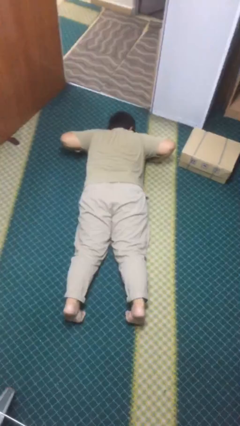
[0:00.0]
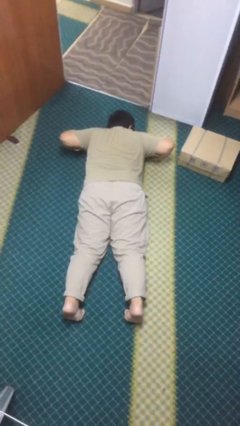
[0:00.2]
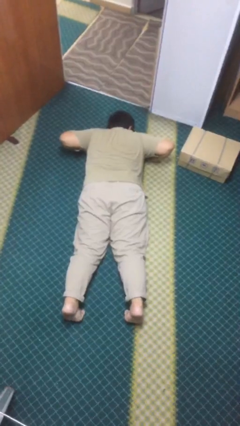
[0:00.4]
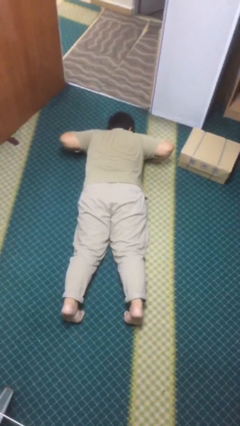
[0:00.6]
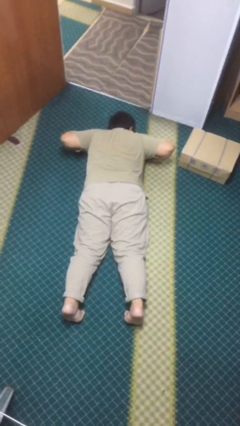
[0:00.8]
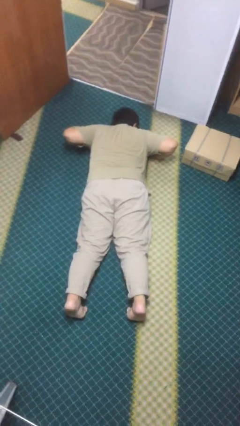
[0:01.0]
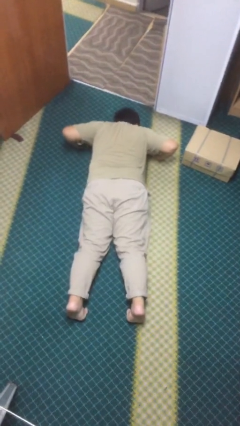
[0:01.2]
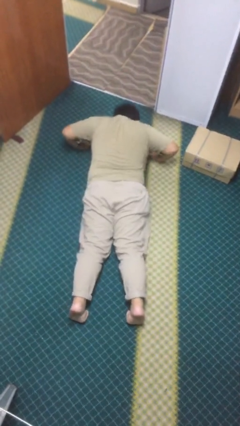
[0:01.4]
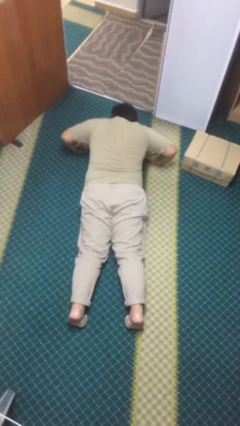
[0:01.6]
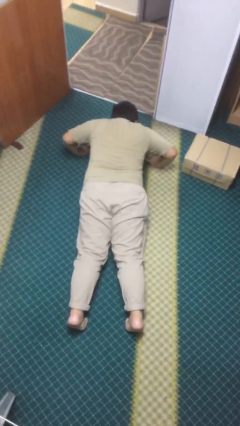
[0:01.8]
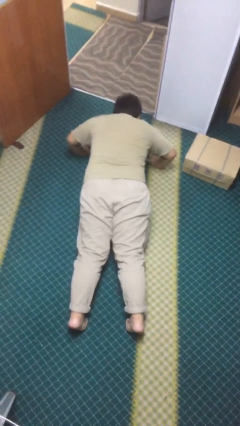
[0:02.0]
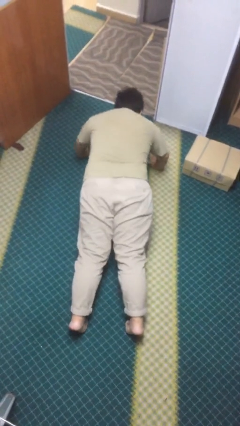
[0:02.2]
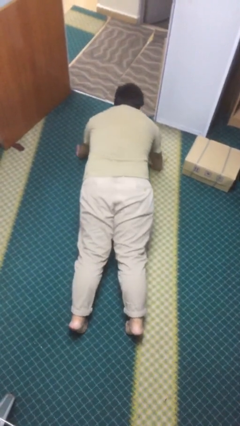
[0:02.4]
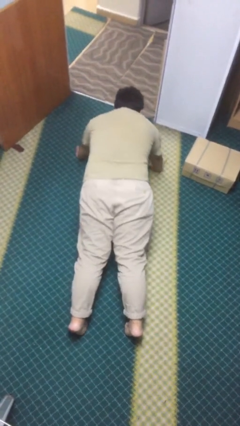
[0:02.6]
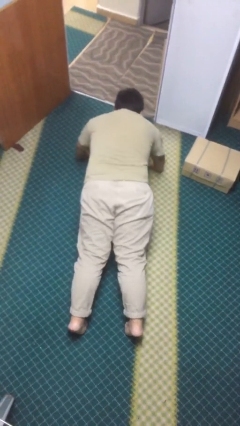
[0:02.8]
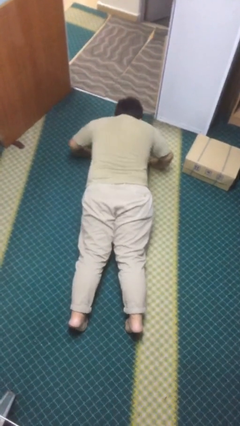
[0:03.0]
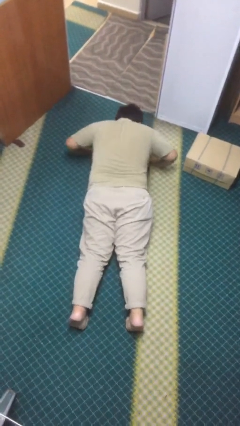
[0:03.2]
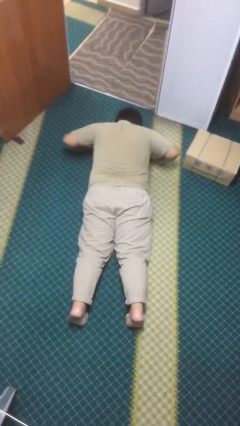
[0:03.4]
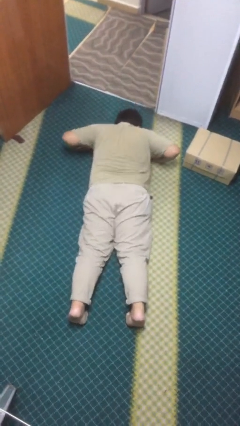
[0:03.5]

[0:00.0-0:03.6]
person exercises with pushup

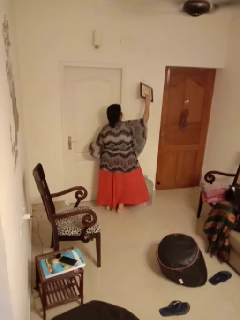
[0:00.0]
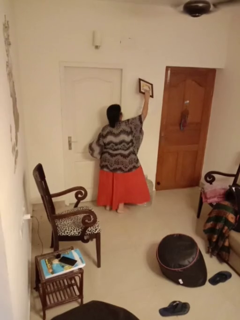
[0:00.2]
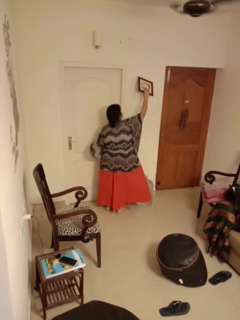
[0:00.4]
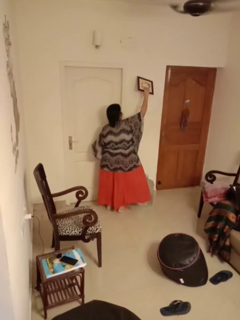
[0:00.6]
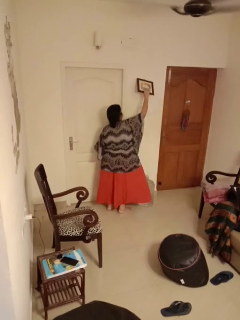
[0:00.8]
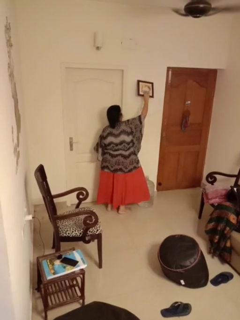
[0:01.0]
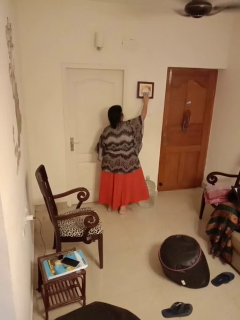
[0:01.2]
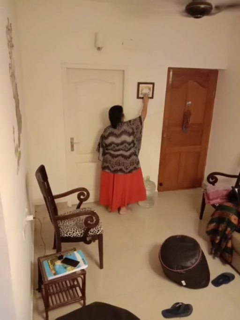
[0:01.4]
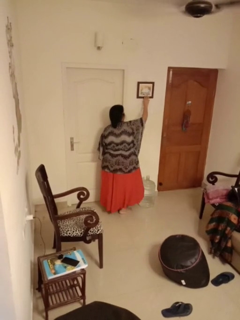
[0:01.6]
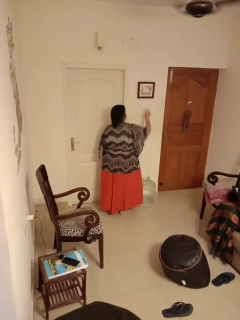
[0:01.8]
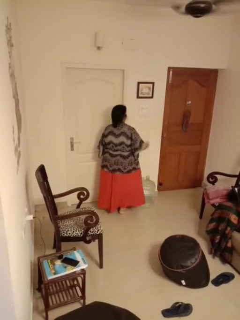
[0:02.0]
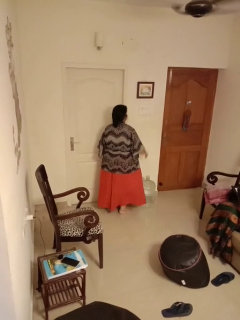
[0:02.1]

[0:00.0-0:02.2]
person puts up picture frame

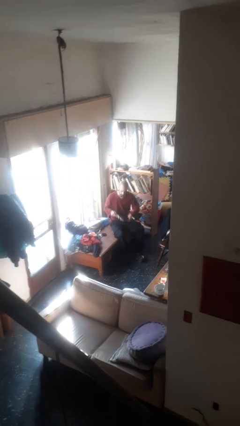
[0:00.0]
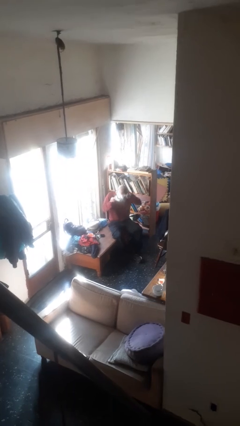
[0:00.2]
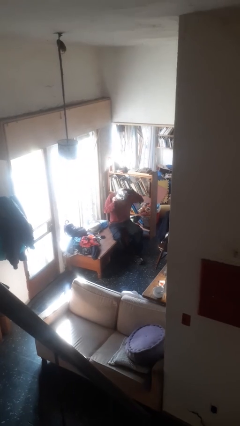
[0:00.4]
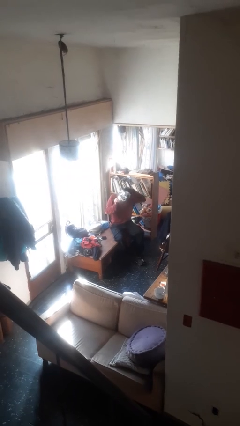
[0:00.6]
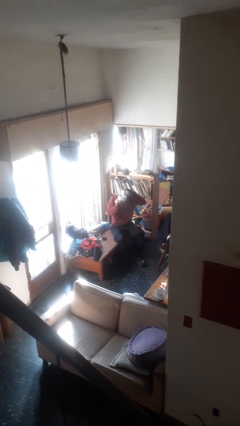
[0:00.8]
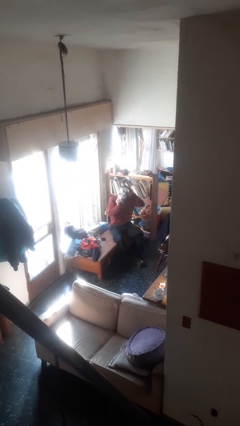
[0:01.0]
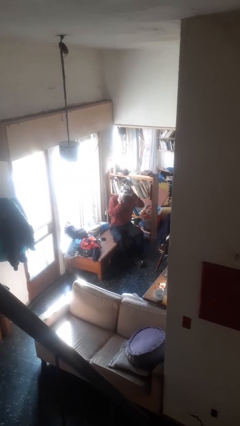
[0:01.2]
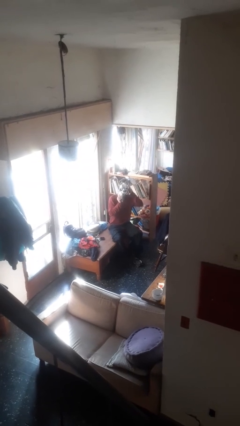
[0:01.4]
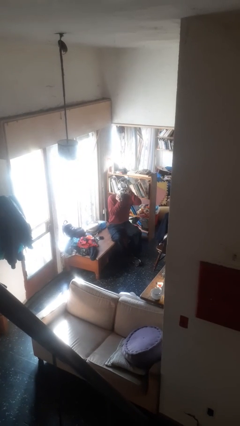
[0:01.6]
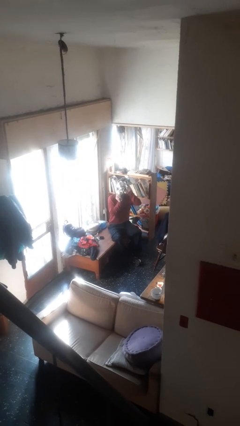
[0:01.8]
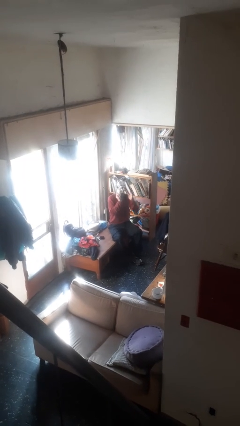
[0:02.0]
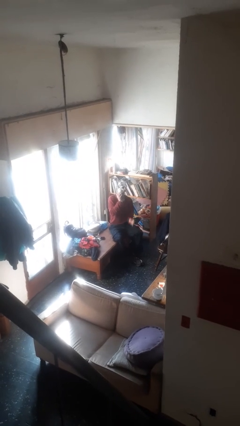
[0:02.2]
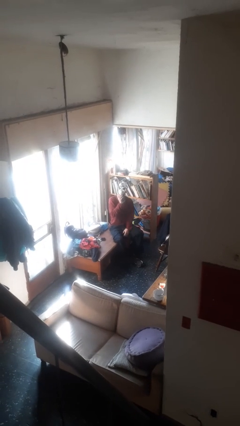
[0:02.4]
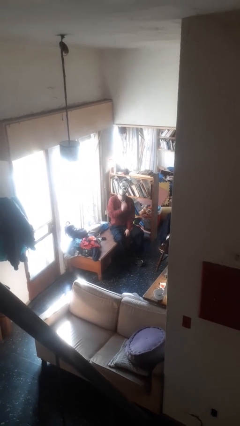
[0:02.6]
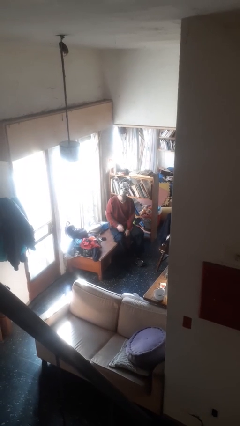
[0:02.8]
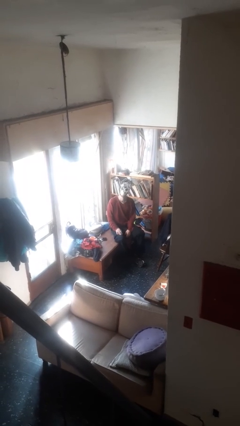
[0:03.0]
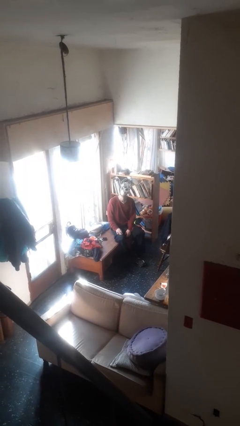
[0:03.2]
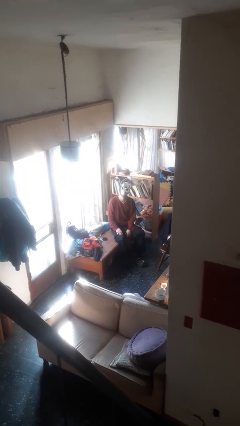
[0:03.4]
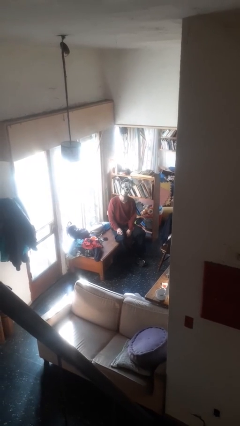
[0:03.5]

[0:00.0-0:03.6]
person puts on facemask

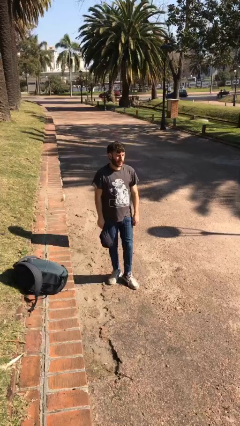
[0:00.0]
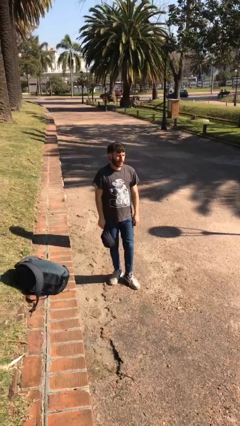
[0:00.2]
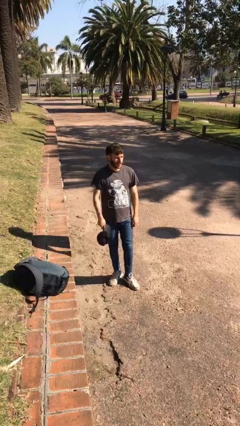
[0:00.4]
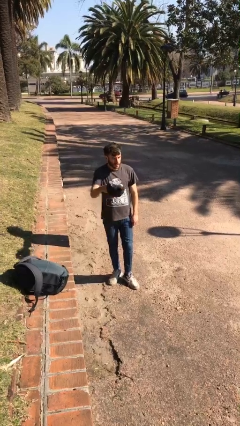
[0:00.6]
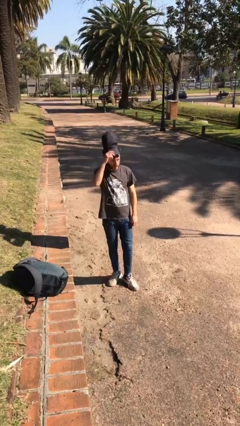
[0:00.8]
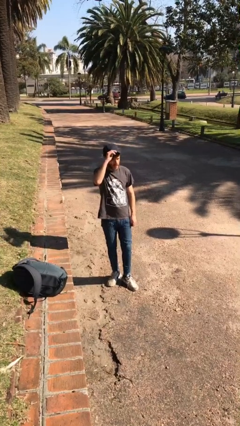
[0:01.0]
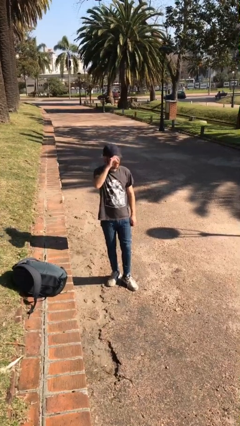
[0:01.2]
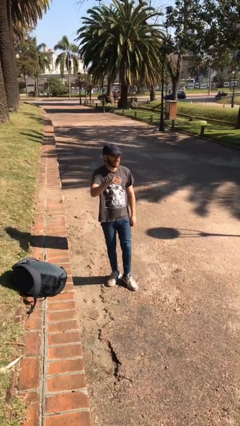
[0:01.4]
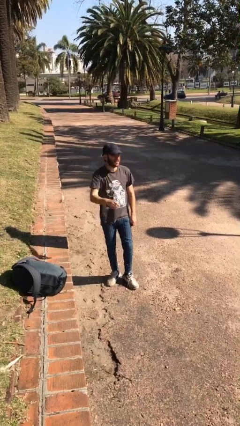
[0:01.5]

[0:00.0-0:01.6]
person puts on hat

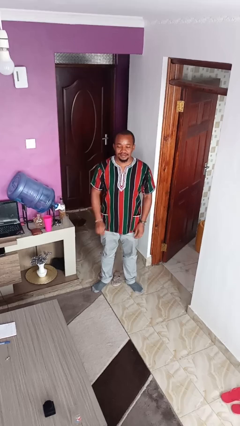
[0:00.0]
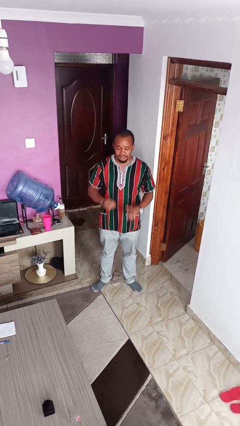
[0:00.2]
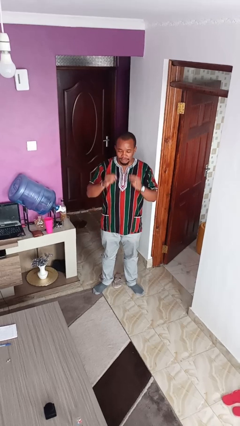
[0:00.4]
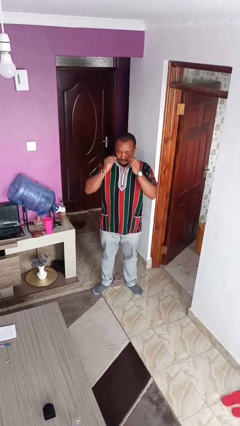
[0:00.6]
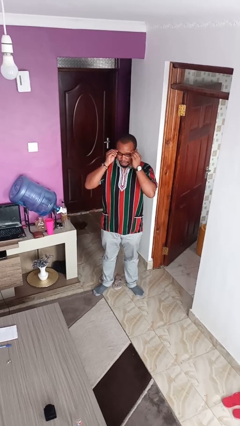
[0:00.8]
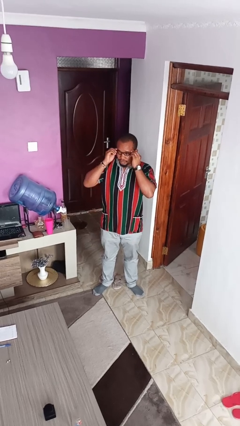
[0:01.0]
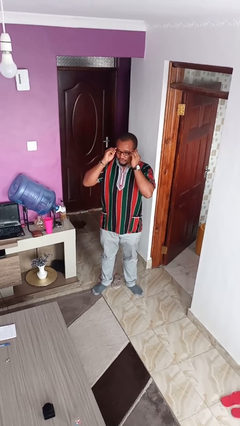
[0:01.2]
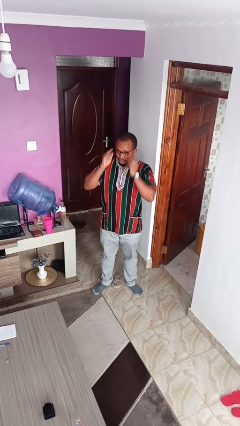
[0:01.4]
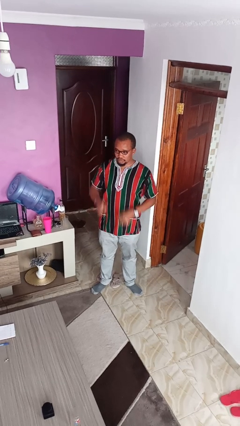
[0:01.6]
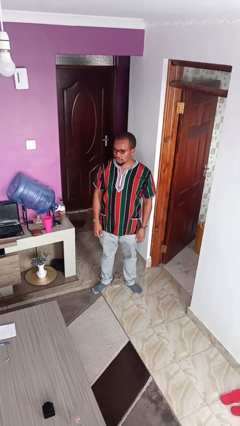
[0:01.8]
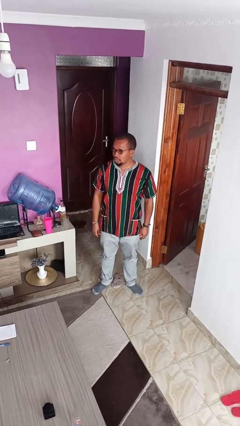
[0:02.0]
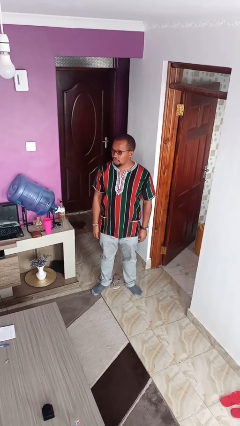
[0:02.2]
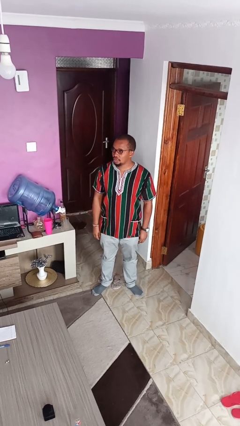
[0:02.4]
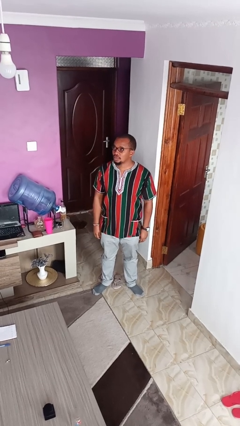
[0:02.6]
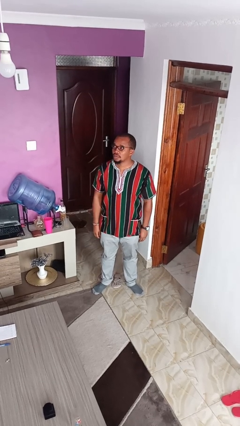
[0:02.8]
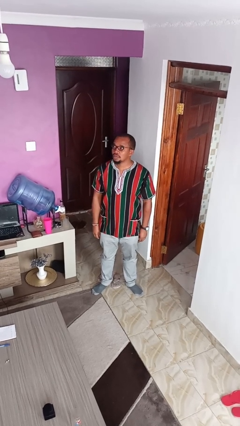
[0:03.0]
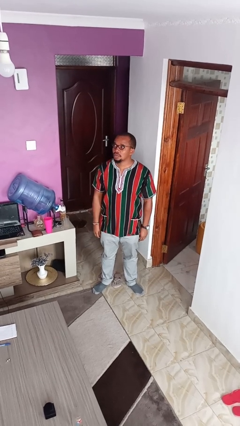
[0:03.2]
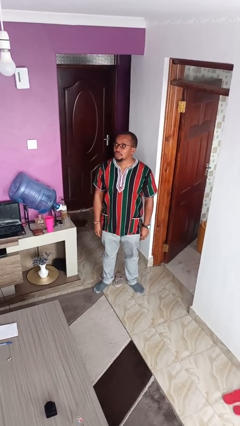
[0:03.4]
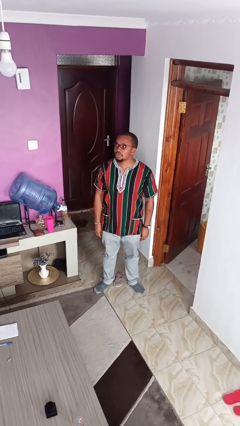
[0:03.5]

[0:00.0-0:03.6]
person puts on glasses

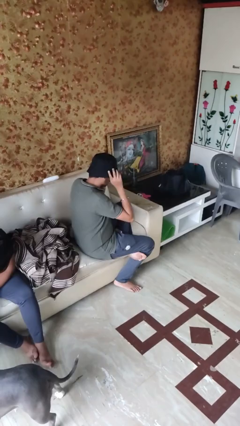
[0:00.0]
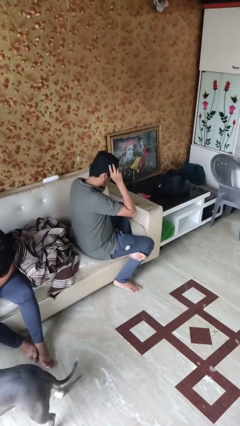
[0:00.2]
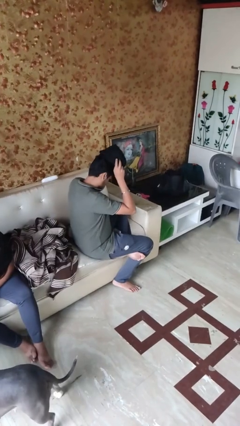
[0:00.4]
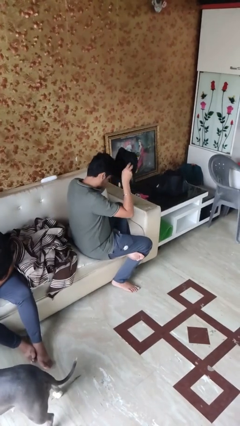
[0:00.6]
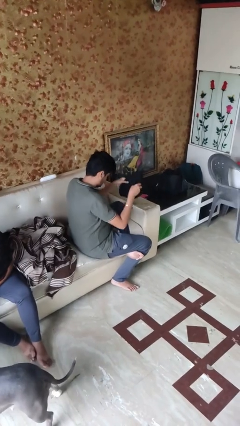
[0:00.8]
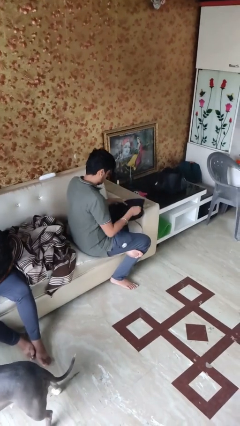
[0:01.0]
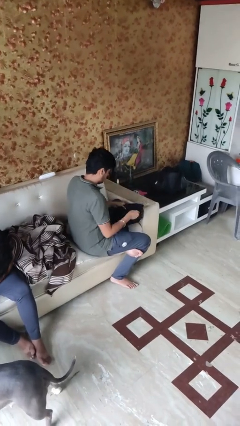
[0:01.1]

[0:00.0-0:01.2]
person takes off hat

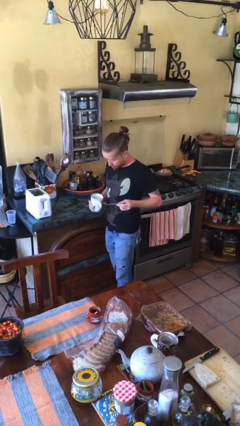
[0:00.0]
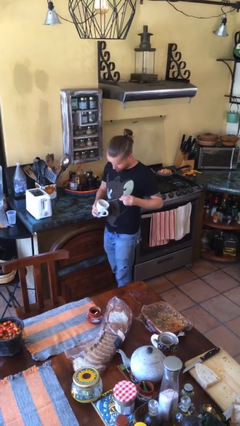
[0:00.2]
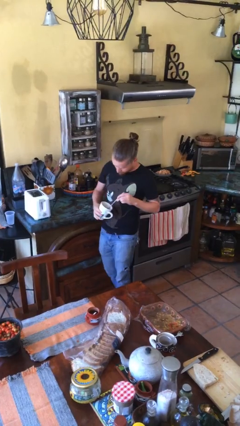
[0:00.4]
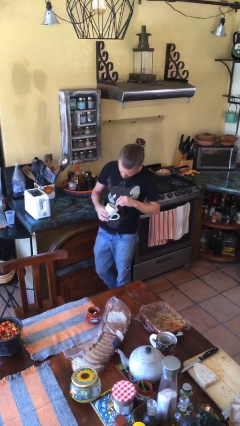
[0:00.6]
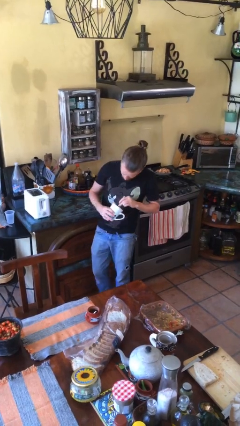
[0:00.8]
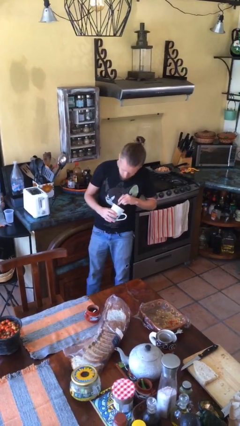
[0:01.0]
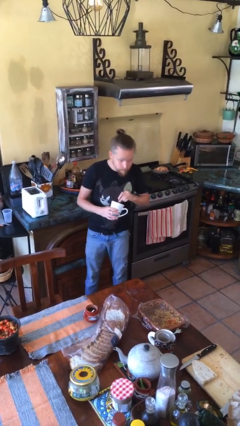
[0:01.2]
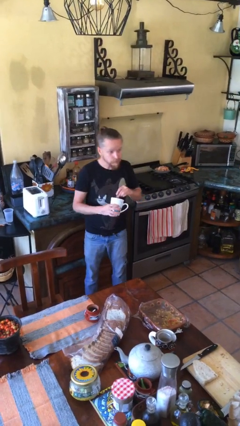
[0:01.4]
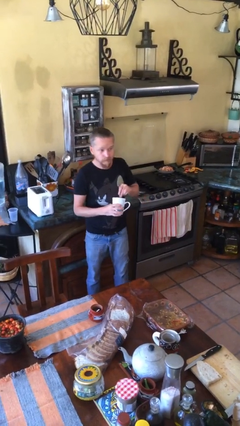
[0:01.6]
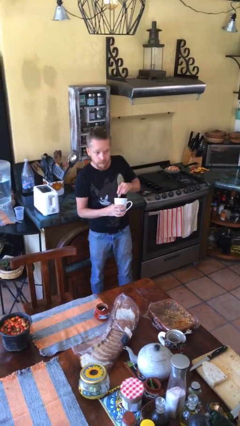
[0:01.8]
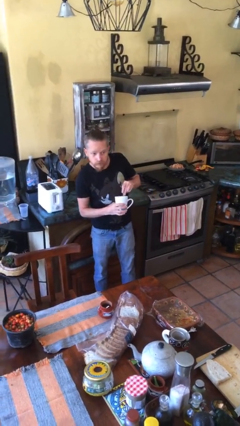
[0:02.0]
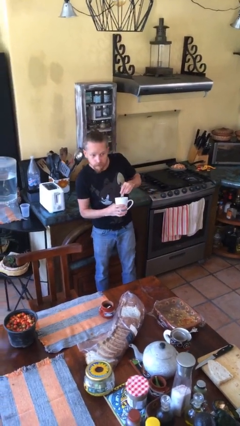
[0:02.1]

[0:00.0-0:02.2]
person stirs mug
